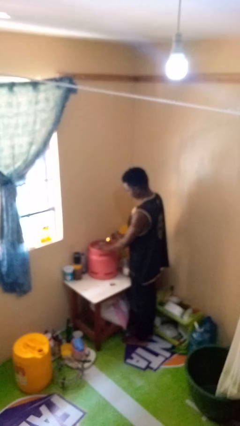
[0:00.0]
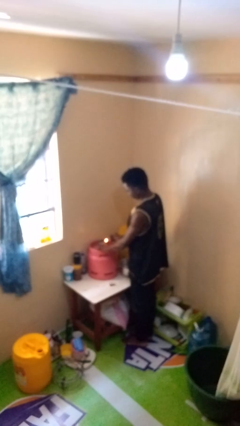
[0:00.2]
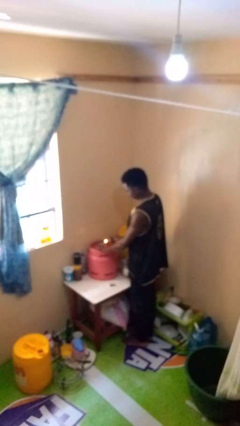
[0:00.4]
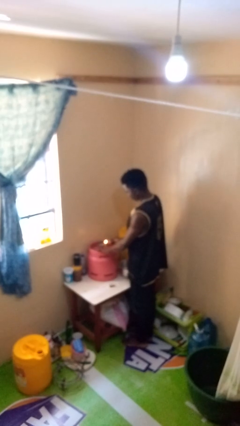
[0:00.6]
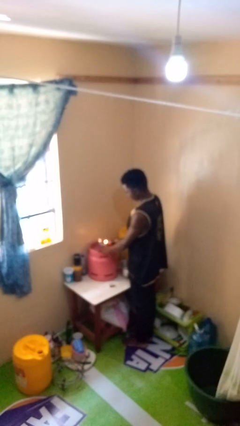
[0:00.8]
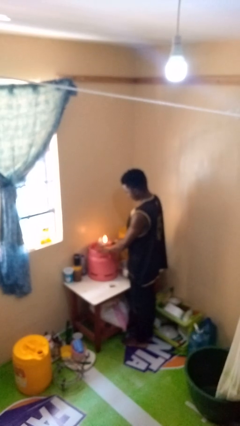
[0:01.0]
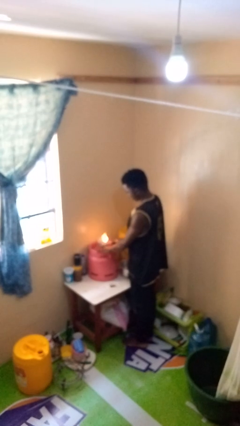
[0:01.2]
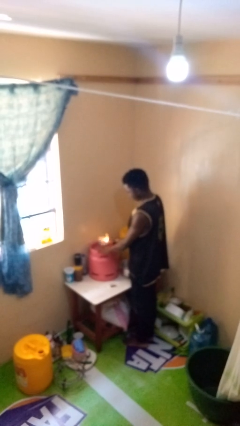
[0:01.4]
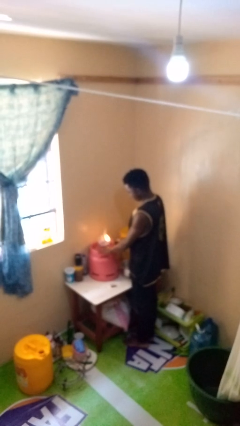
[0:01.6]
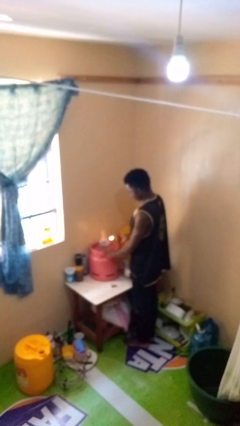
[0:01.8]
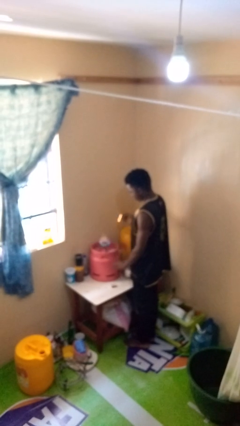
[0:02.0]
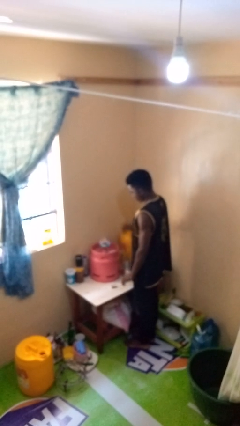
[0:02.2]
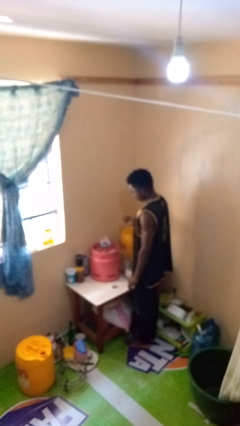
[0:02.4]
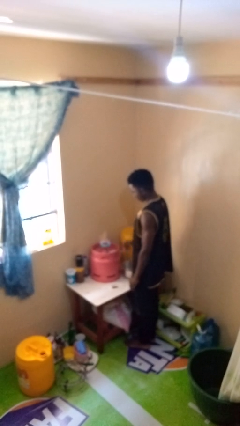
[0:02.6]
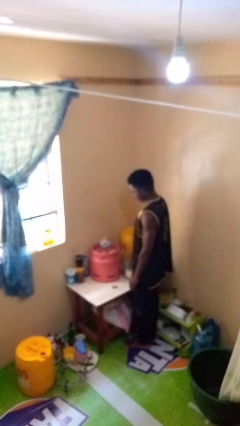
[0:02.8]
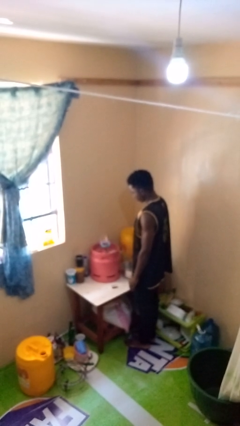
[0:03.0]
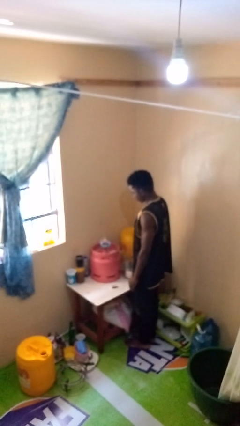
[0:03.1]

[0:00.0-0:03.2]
person turns on stovetop

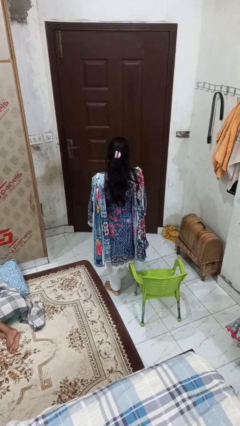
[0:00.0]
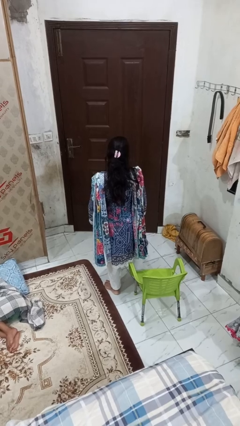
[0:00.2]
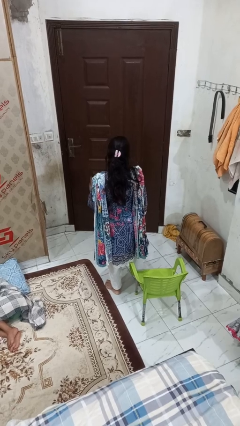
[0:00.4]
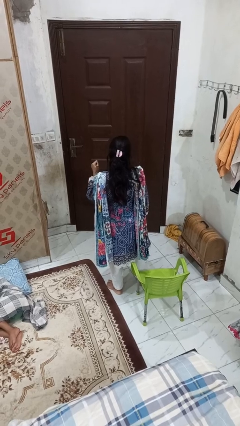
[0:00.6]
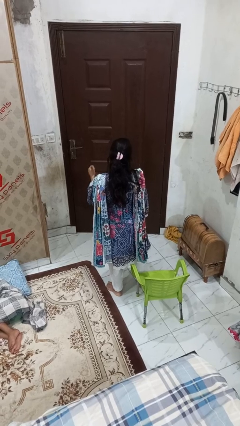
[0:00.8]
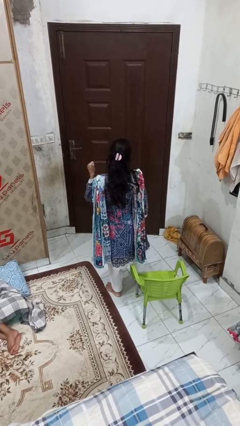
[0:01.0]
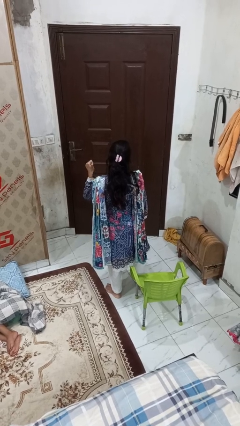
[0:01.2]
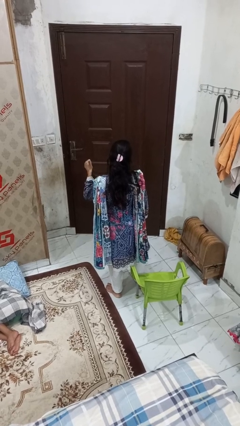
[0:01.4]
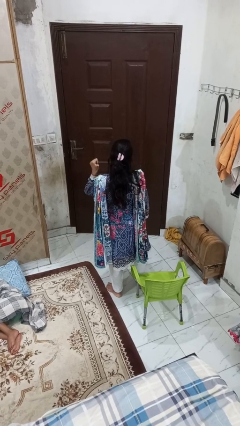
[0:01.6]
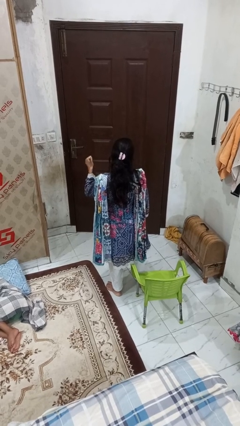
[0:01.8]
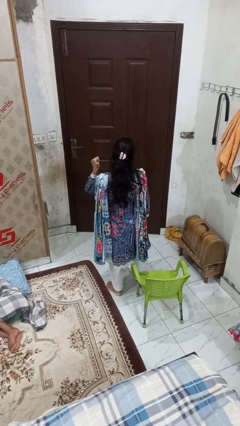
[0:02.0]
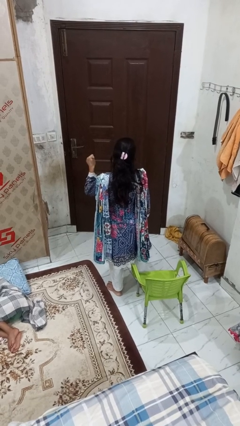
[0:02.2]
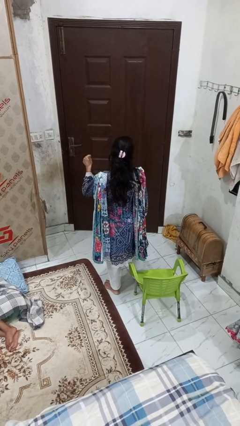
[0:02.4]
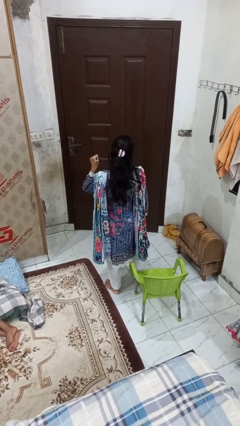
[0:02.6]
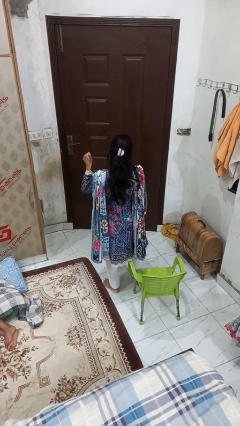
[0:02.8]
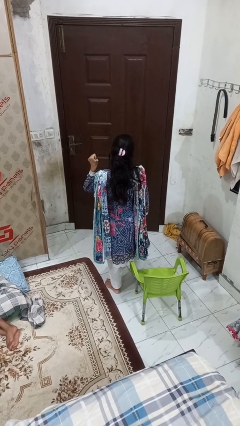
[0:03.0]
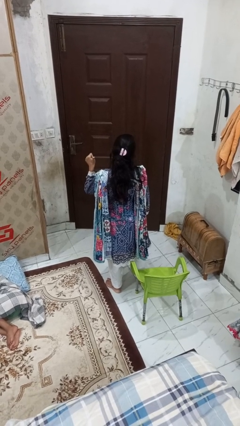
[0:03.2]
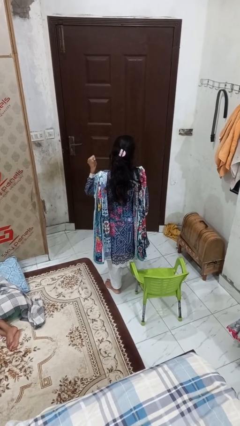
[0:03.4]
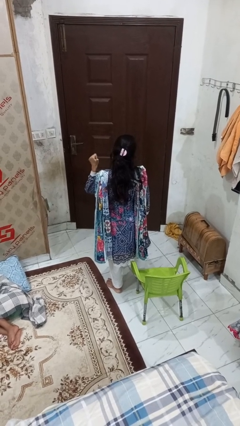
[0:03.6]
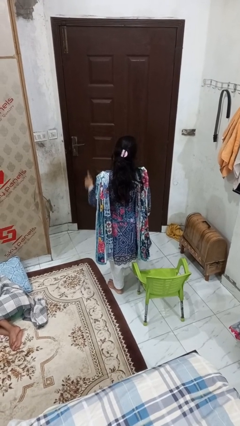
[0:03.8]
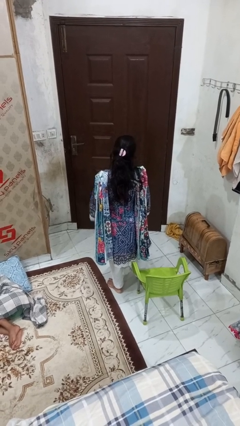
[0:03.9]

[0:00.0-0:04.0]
person gestures behind me

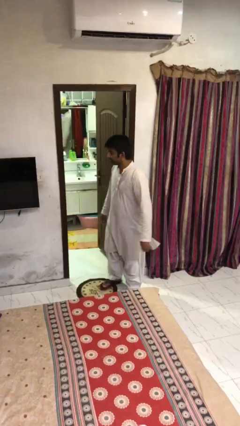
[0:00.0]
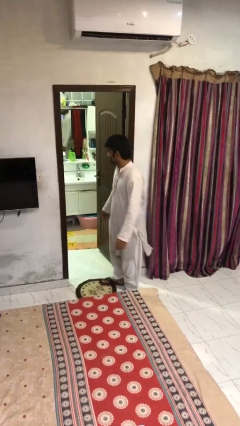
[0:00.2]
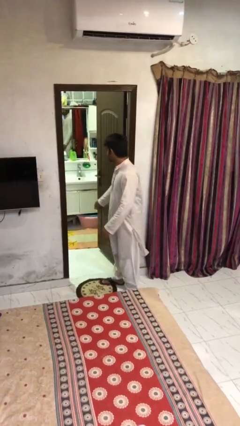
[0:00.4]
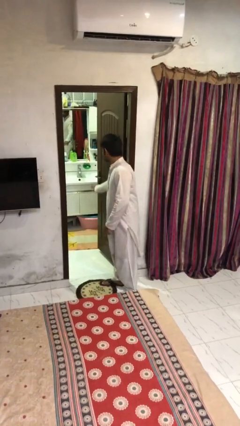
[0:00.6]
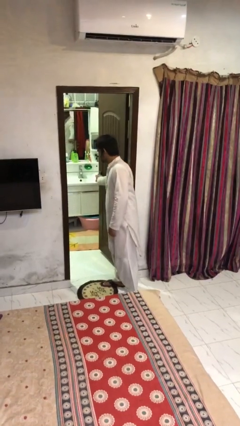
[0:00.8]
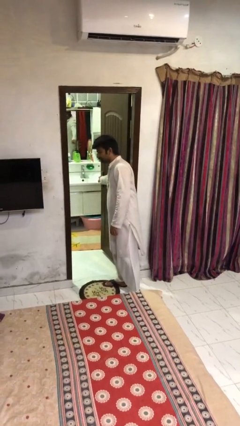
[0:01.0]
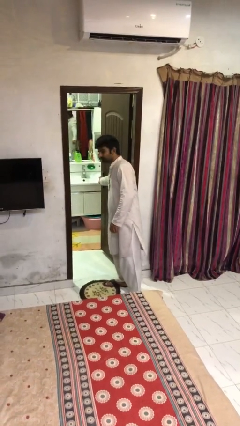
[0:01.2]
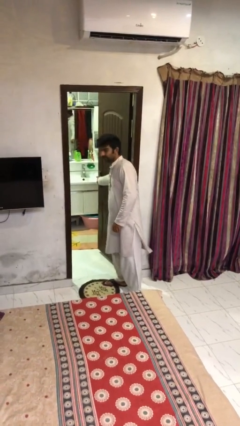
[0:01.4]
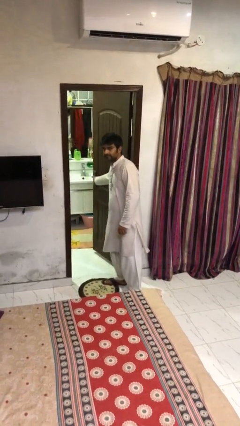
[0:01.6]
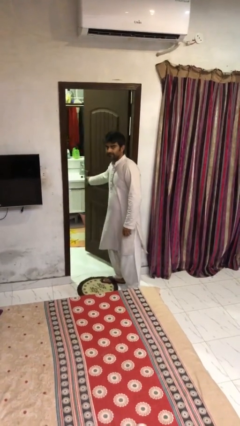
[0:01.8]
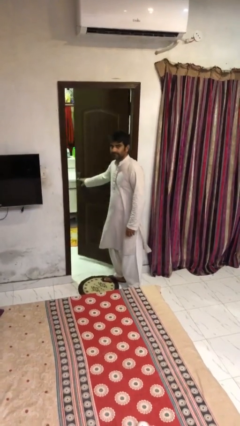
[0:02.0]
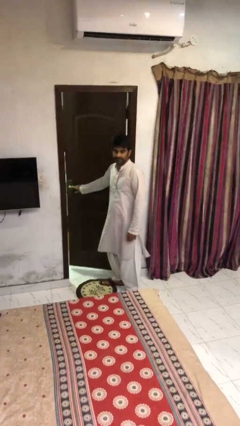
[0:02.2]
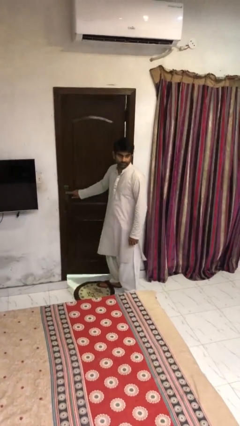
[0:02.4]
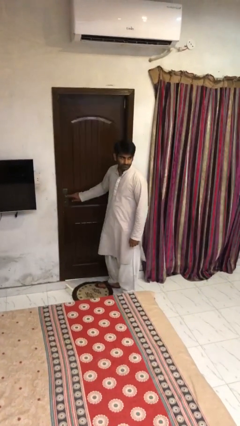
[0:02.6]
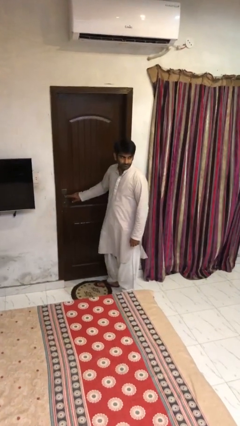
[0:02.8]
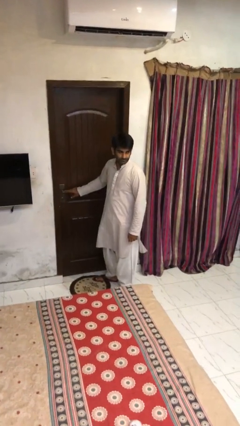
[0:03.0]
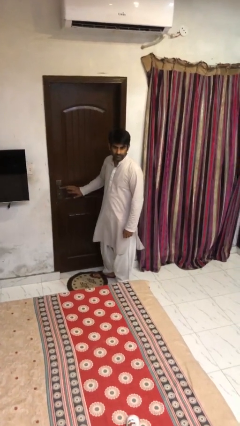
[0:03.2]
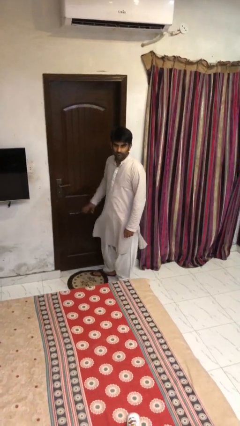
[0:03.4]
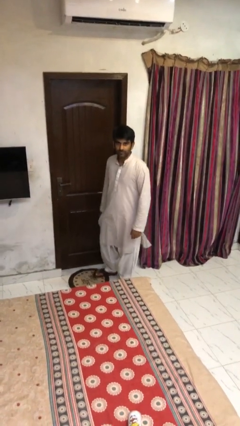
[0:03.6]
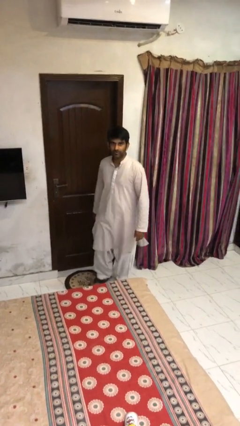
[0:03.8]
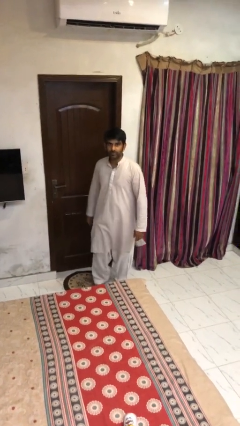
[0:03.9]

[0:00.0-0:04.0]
person closes facility door

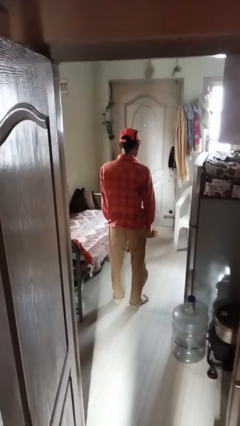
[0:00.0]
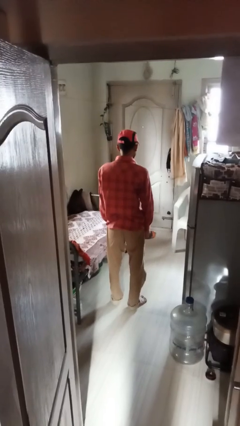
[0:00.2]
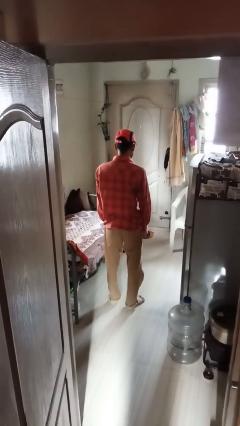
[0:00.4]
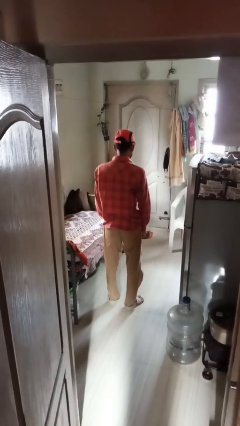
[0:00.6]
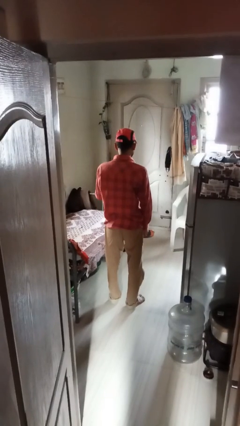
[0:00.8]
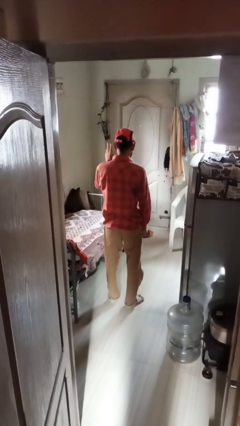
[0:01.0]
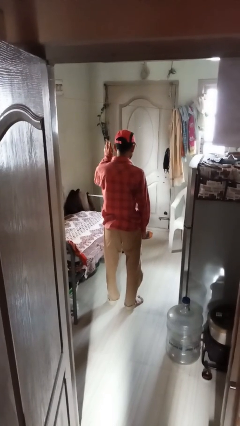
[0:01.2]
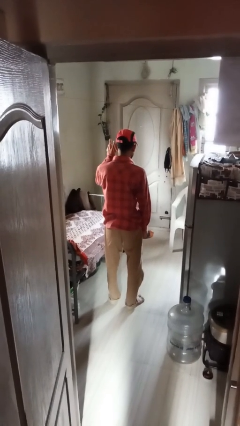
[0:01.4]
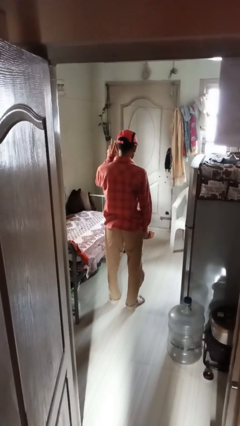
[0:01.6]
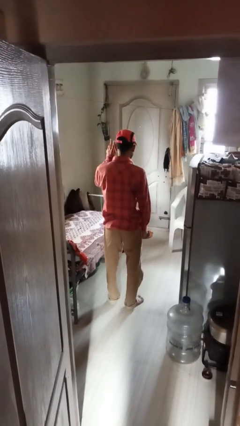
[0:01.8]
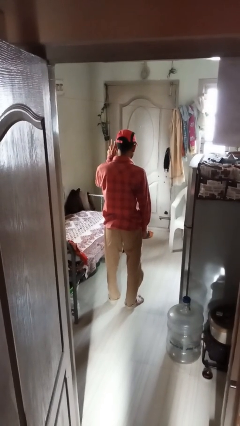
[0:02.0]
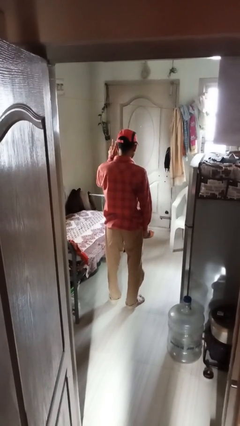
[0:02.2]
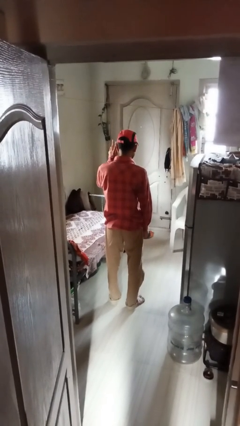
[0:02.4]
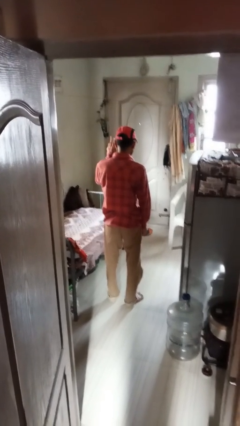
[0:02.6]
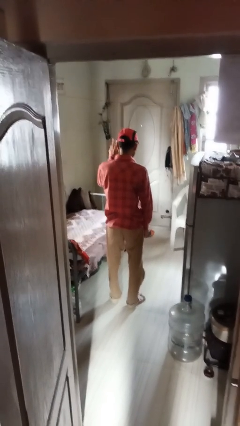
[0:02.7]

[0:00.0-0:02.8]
person gestures peace

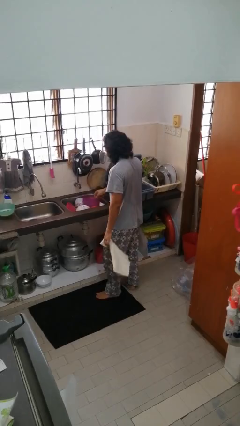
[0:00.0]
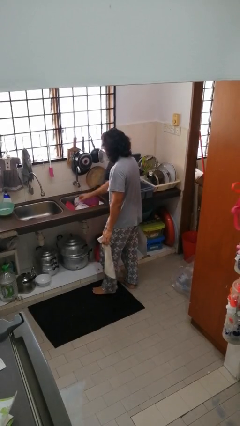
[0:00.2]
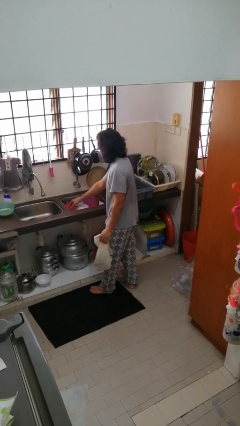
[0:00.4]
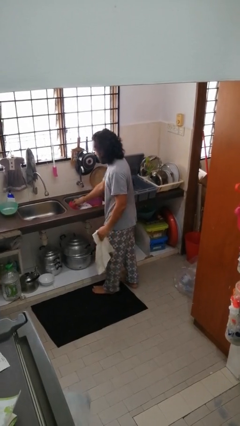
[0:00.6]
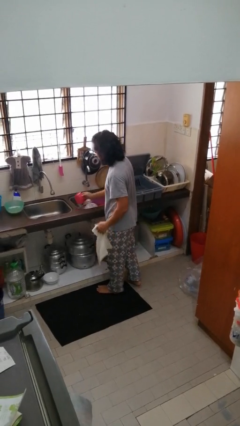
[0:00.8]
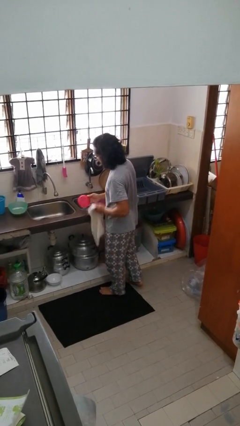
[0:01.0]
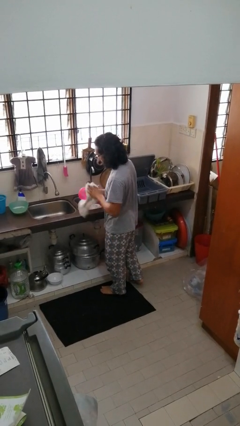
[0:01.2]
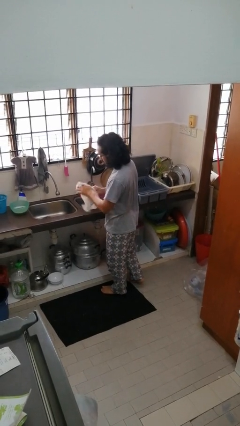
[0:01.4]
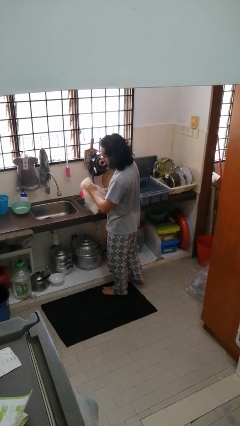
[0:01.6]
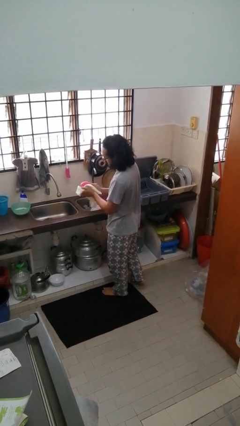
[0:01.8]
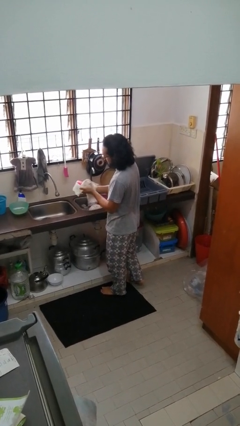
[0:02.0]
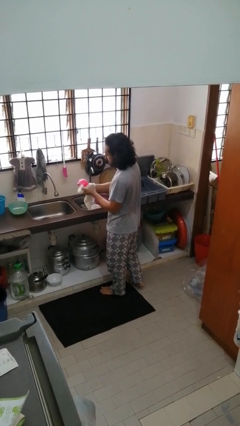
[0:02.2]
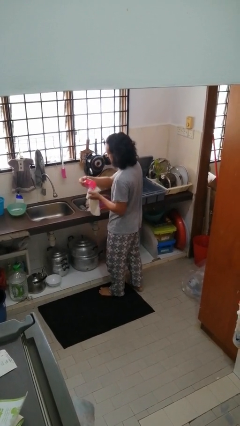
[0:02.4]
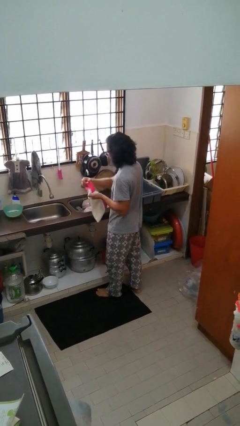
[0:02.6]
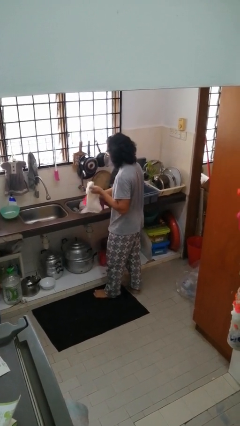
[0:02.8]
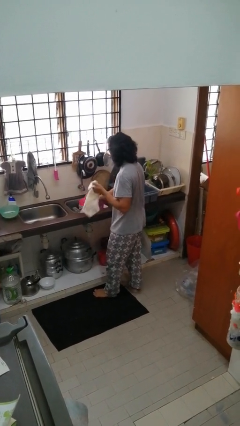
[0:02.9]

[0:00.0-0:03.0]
person dries dish

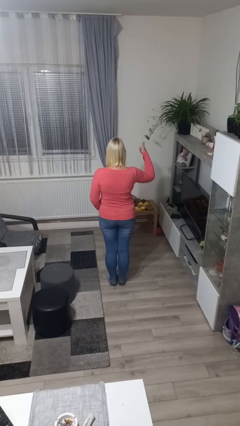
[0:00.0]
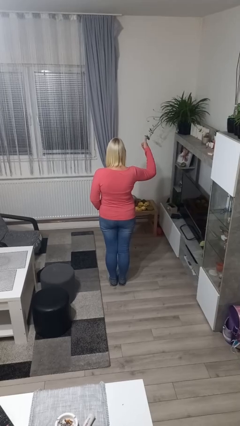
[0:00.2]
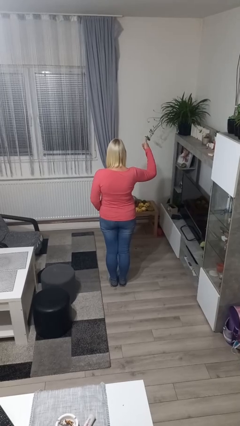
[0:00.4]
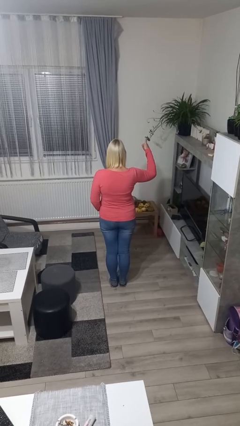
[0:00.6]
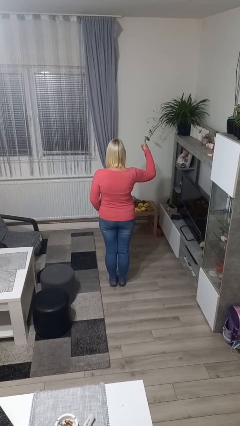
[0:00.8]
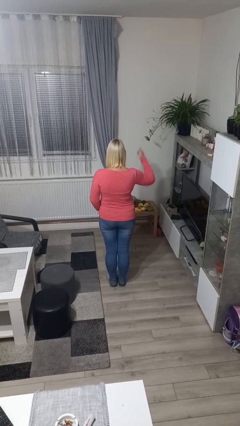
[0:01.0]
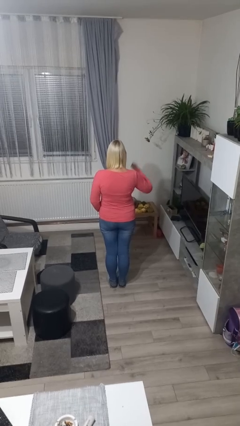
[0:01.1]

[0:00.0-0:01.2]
person gestures number one
